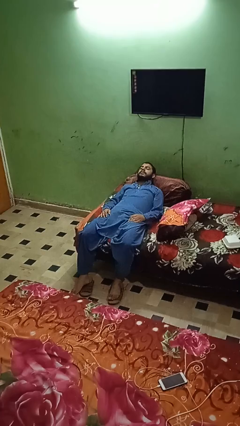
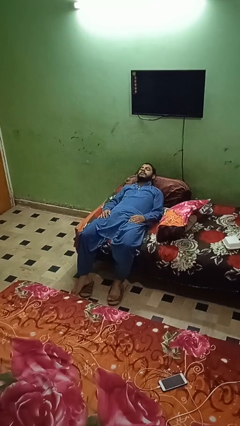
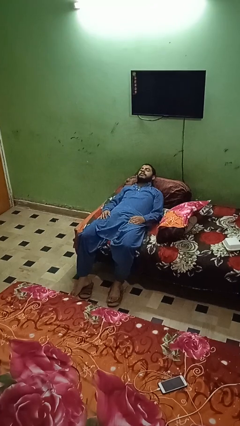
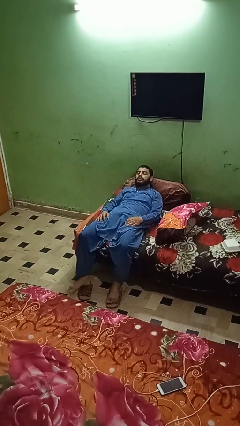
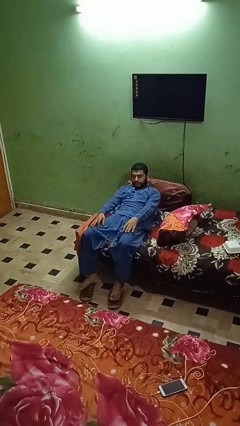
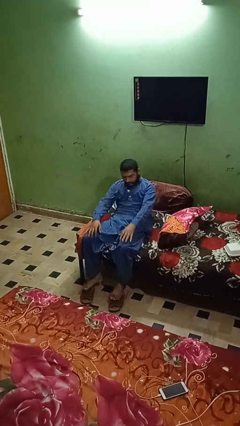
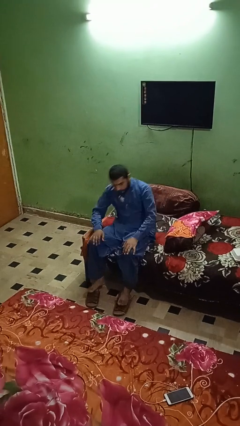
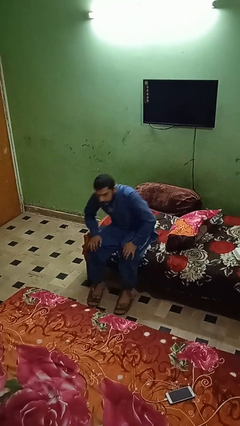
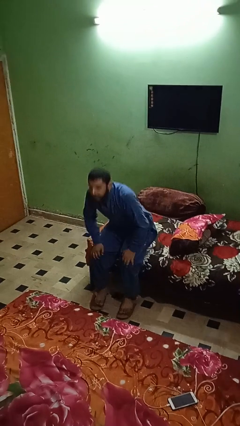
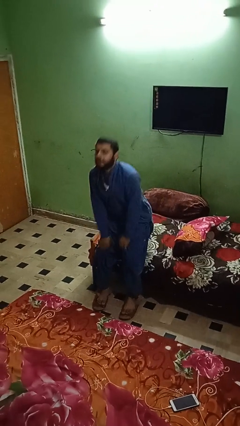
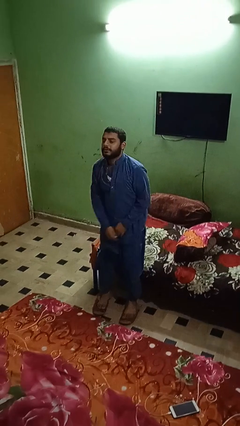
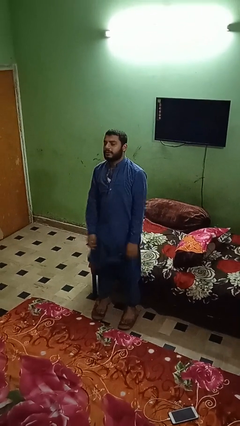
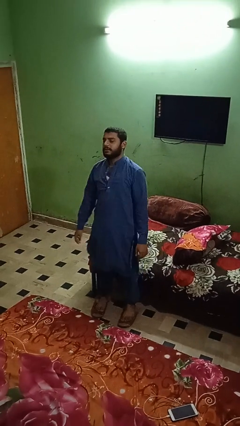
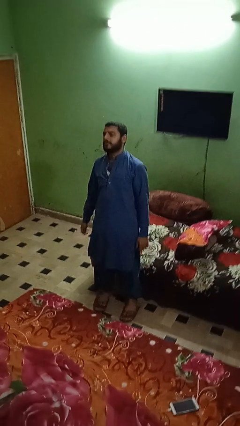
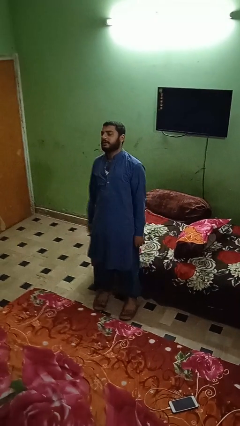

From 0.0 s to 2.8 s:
person stands up

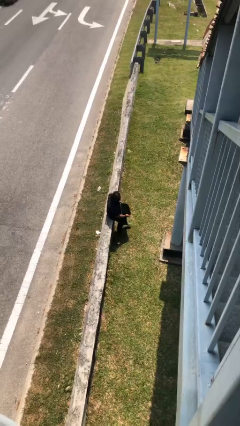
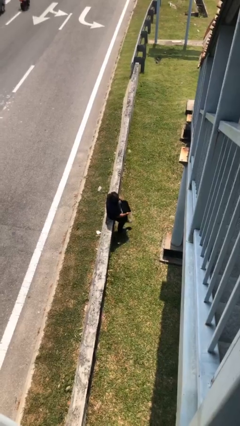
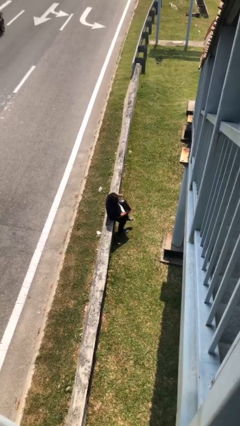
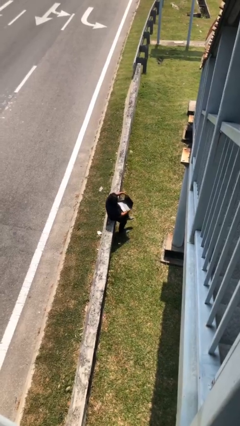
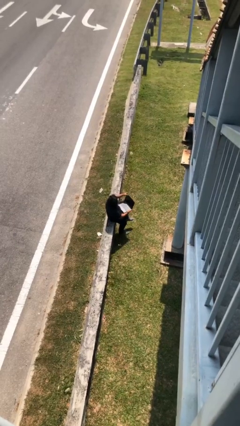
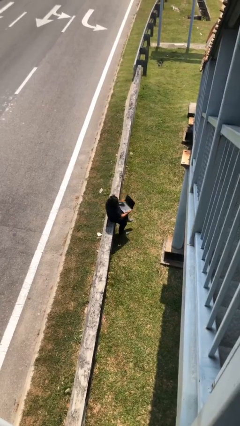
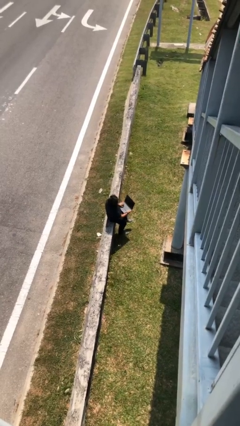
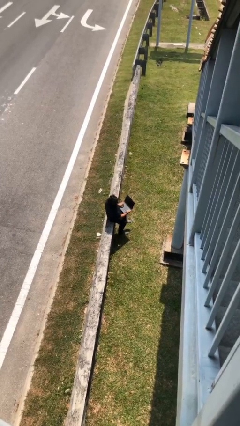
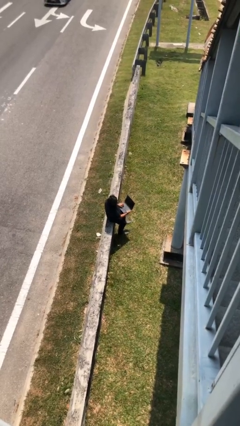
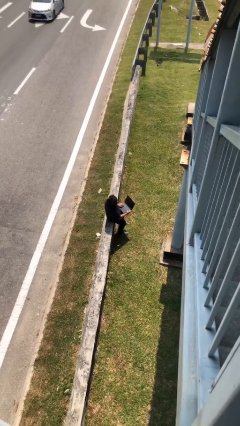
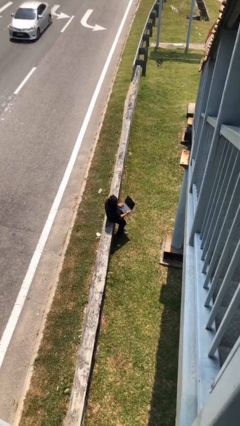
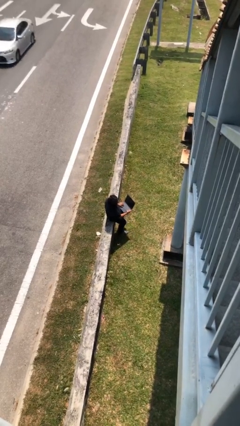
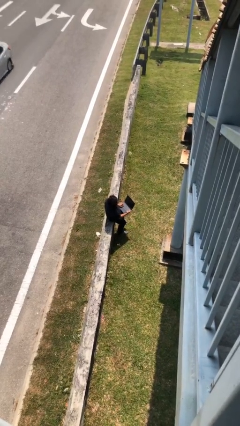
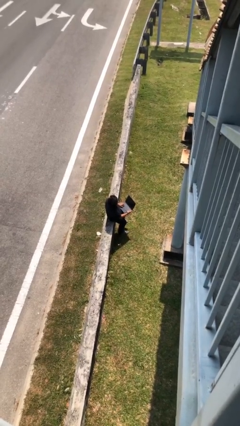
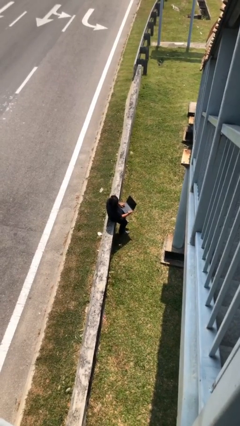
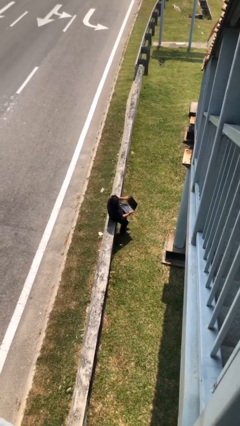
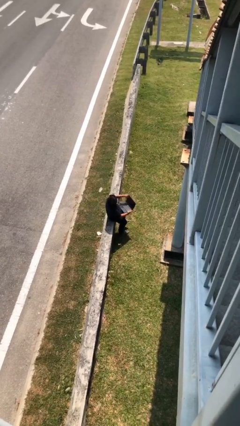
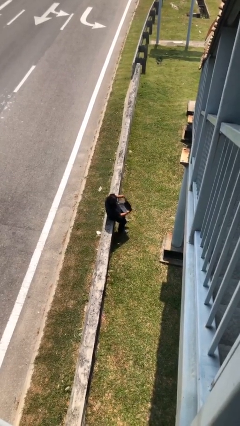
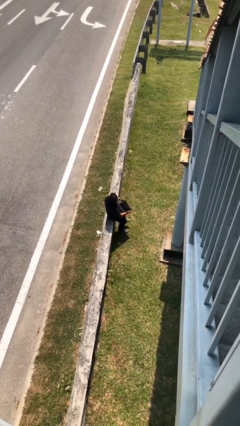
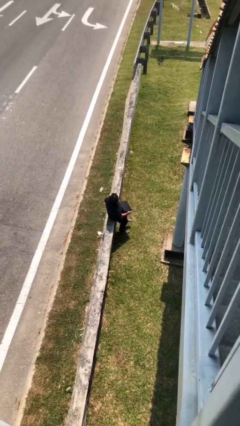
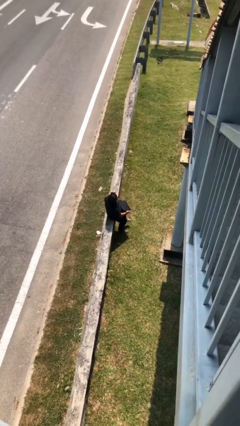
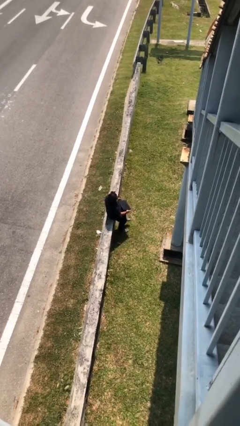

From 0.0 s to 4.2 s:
person interacts with laptop

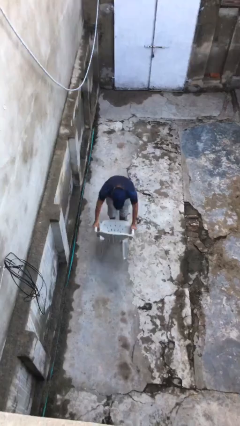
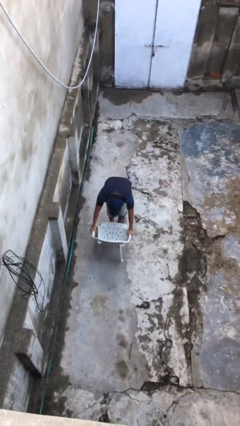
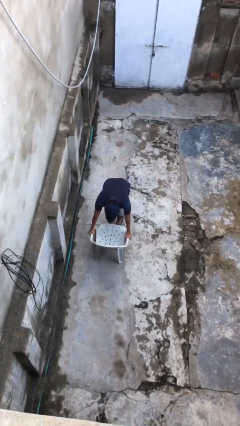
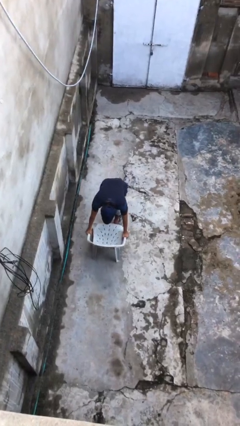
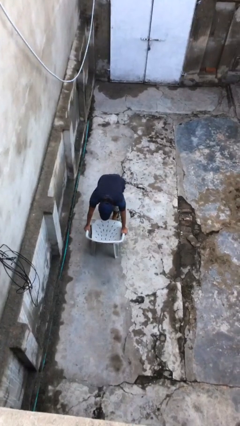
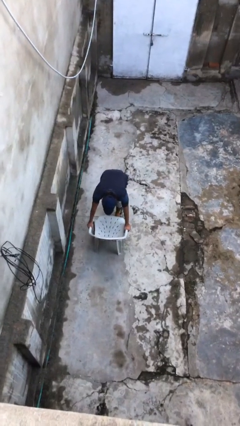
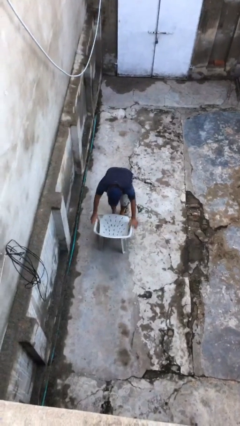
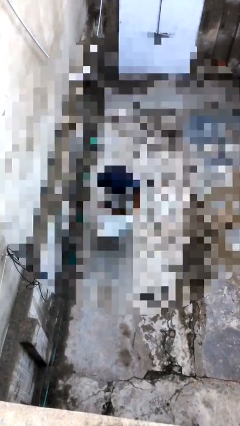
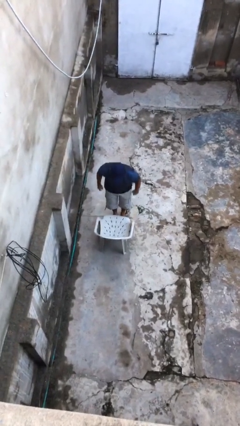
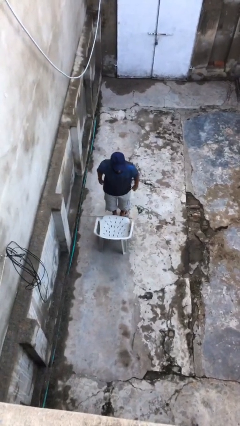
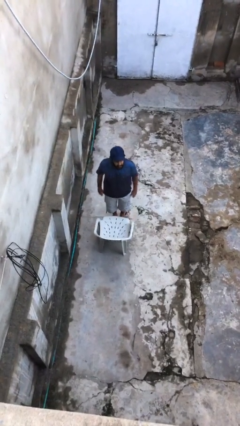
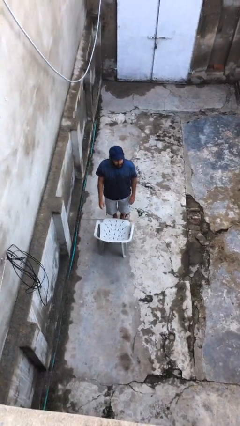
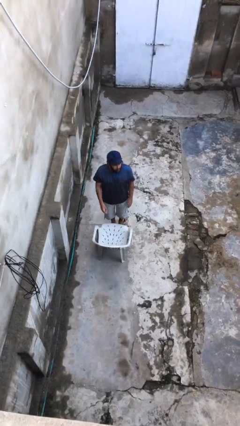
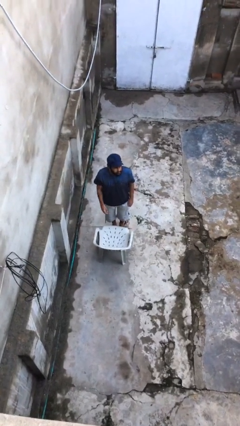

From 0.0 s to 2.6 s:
person puts down object on floor

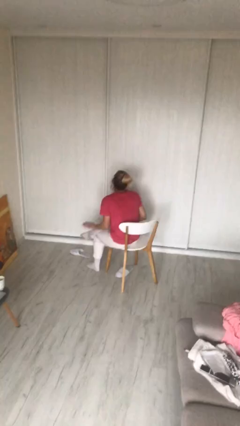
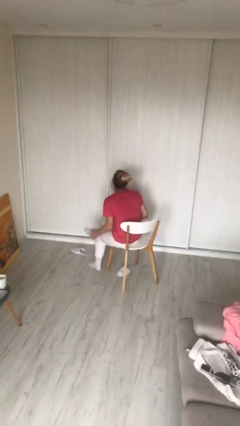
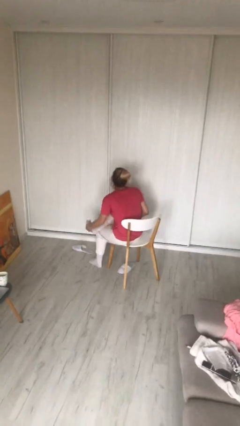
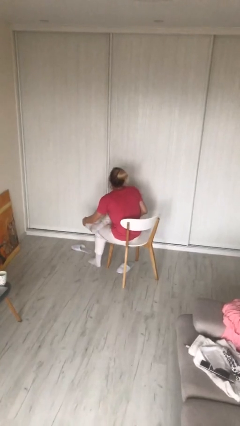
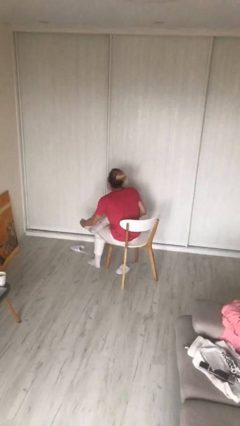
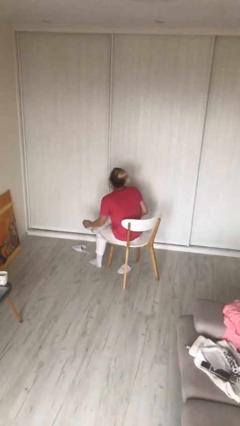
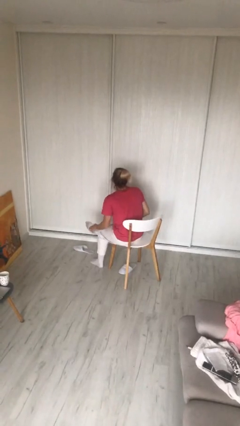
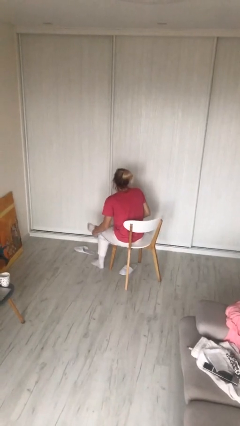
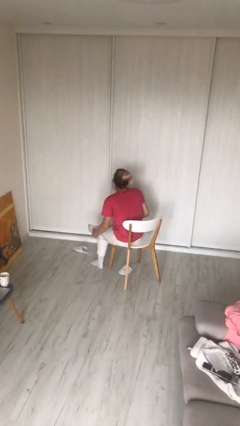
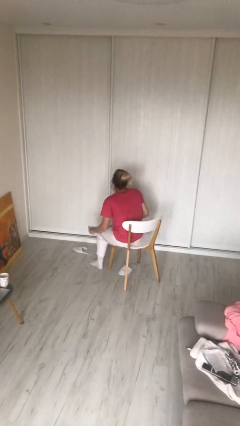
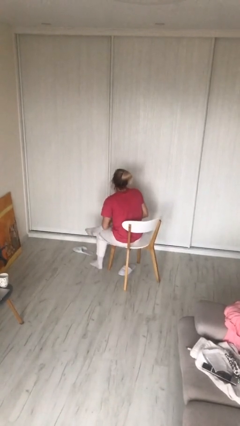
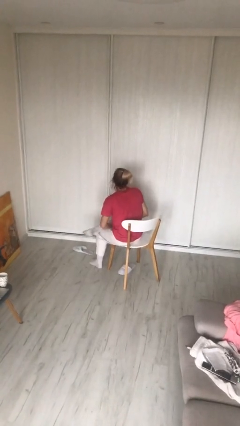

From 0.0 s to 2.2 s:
person rubs foot

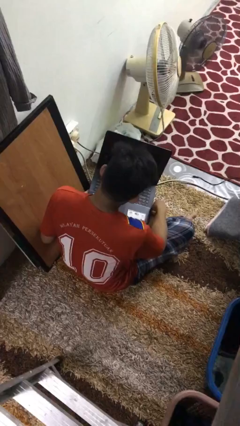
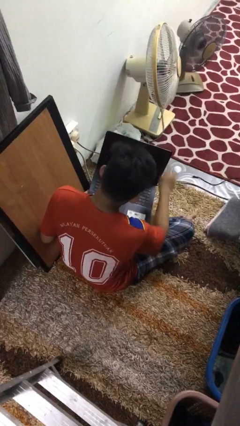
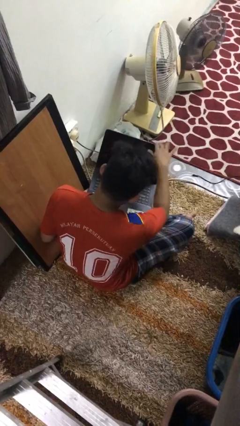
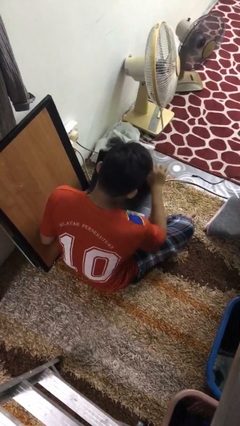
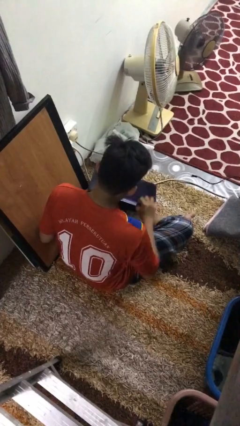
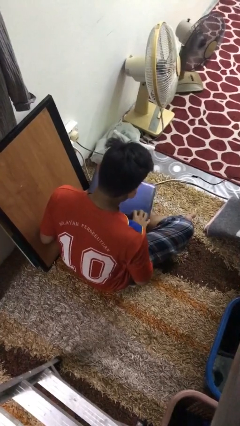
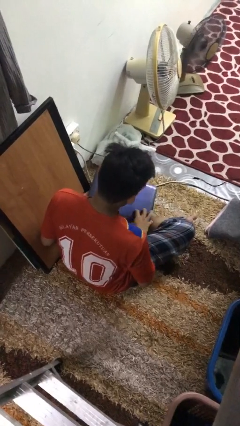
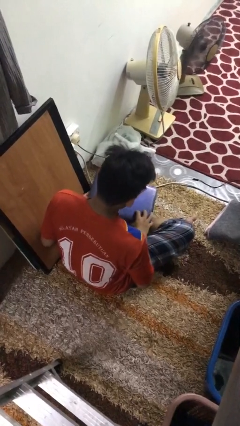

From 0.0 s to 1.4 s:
person closes laptop

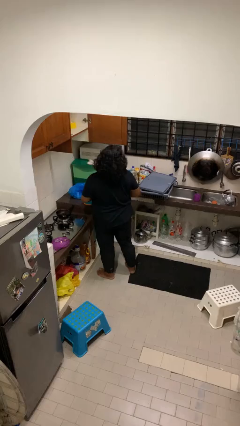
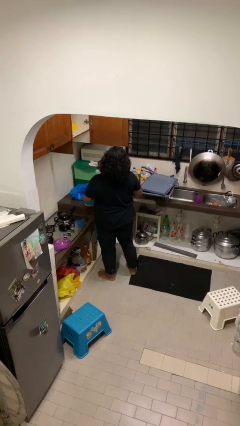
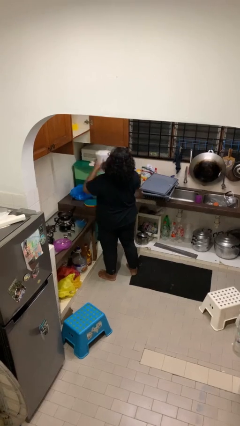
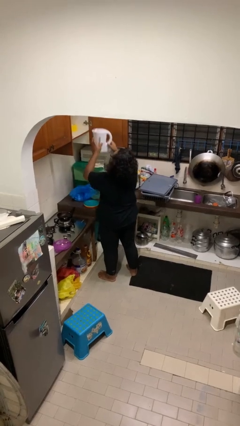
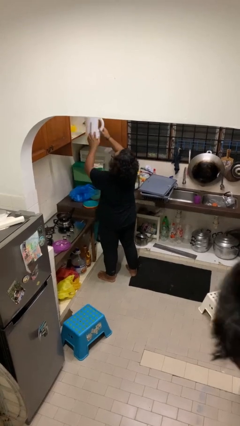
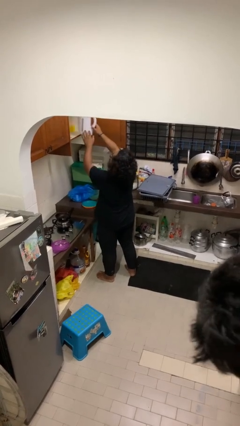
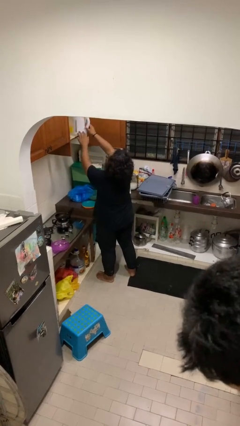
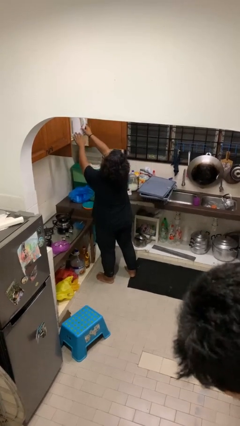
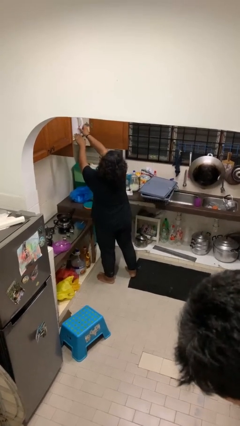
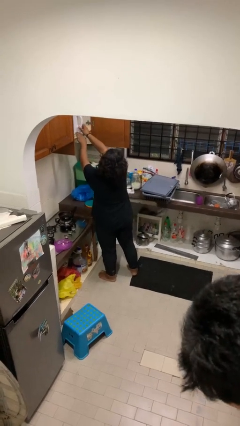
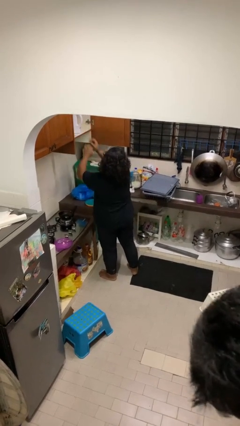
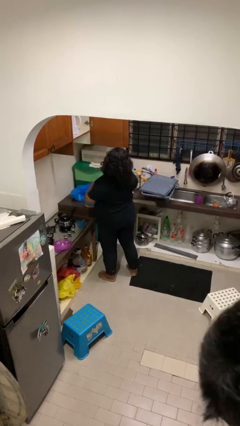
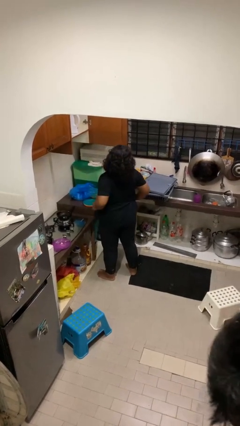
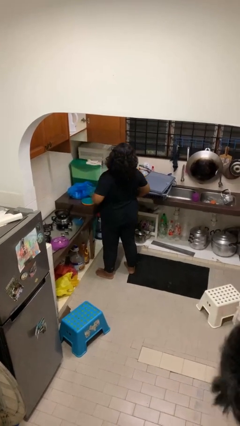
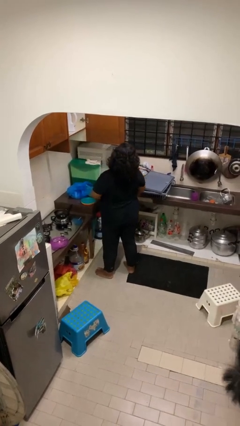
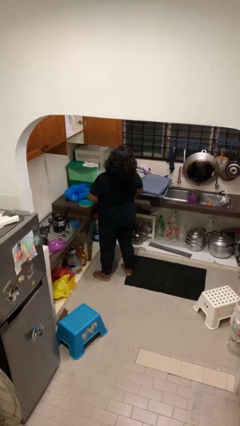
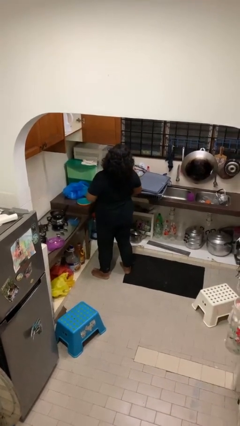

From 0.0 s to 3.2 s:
person puts object in cabinet

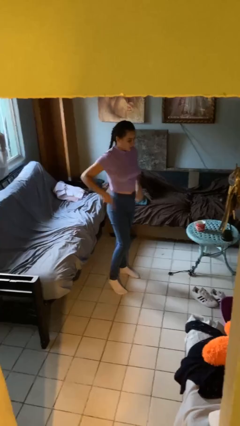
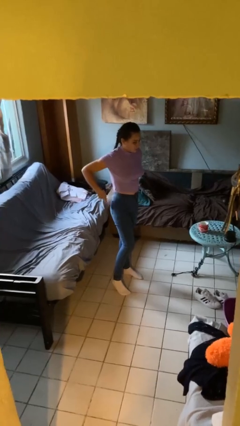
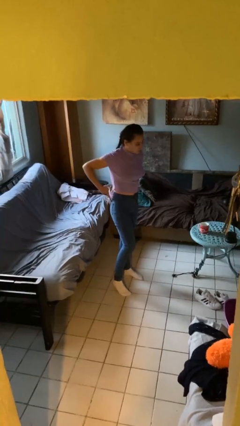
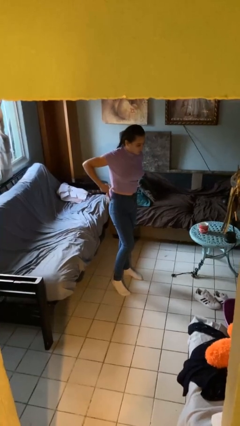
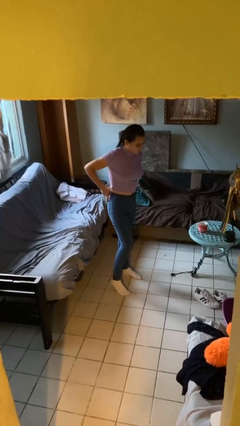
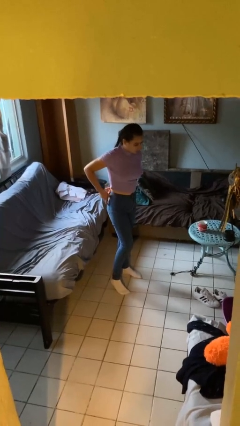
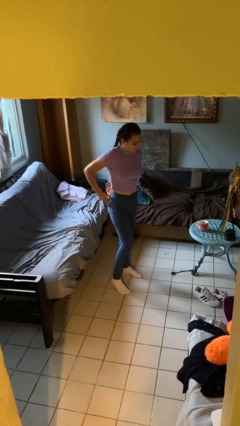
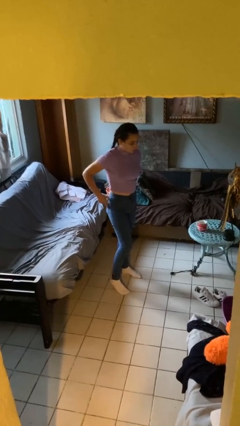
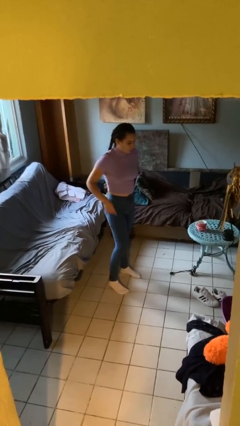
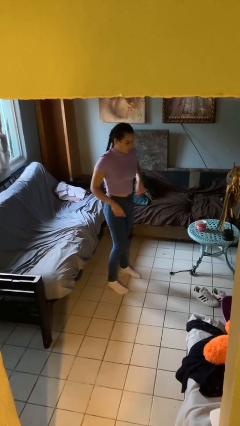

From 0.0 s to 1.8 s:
person puts phone into pocket
